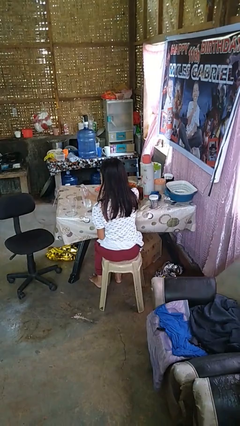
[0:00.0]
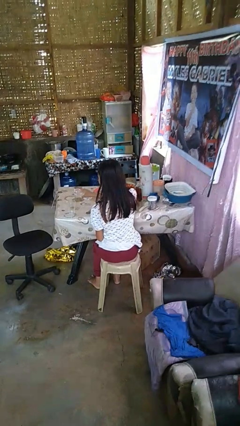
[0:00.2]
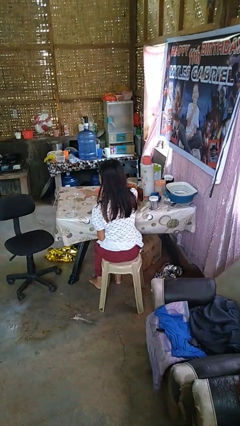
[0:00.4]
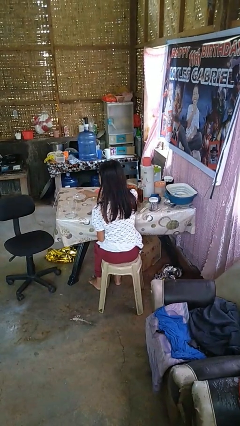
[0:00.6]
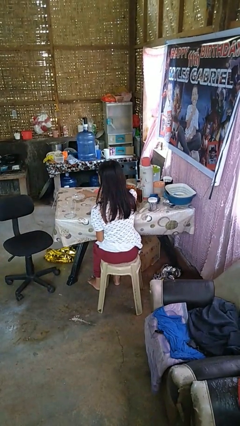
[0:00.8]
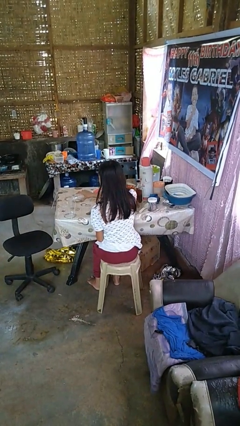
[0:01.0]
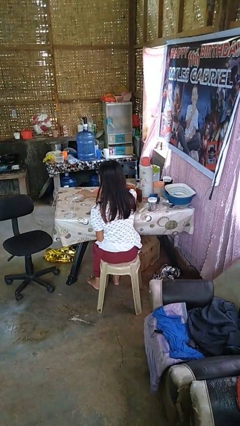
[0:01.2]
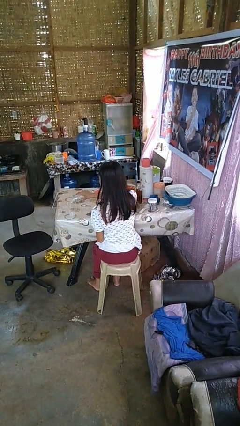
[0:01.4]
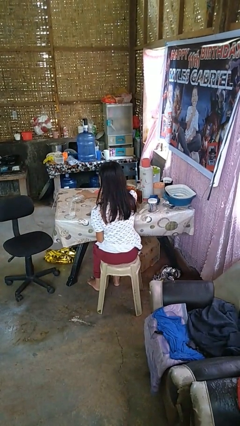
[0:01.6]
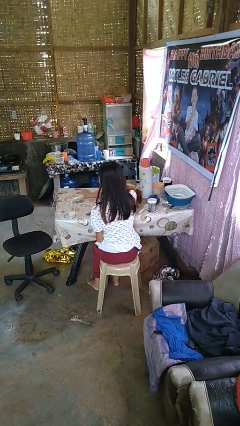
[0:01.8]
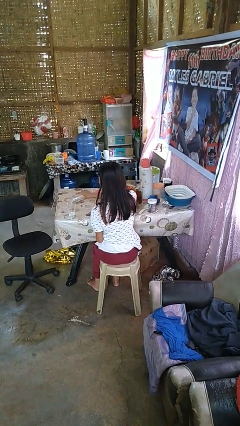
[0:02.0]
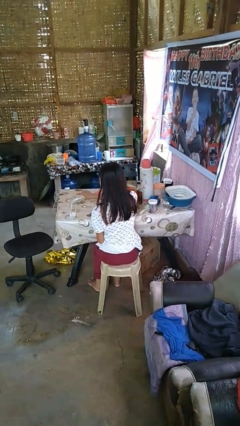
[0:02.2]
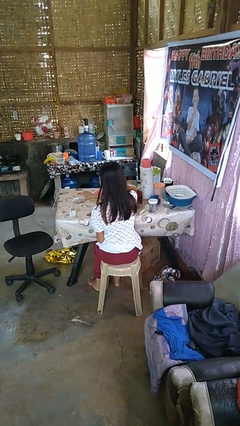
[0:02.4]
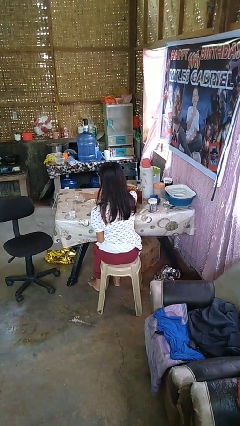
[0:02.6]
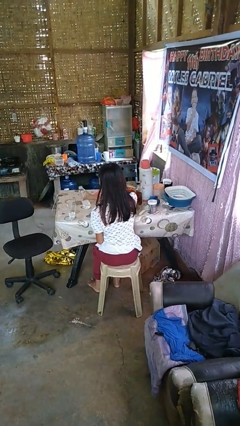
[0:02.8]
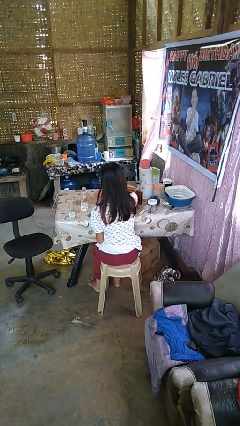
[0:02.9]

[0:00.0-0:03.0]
person pours liquid into cup

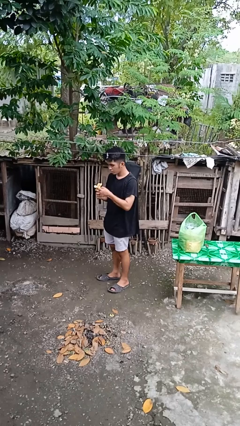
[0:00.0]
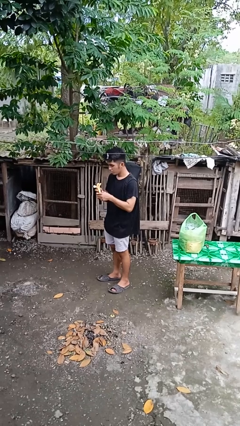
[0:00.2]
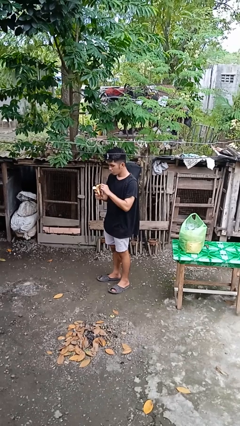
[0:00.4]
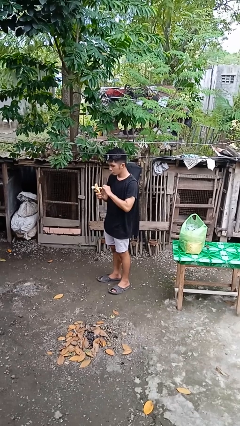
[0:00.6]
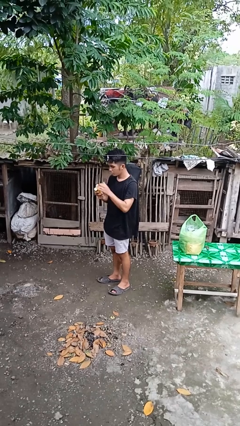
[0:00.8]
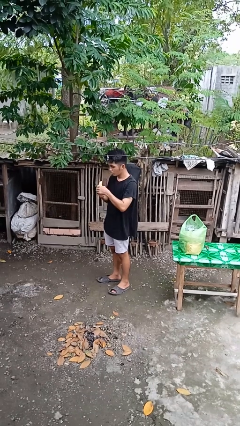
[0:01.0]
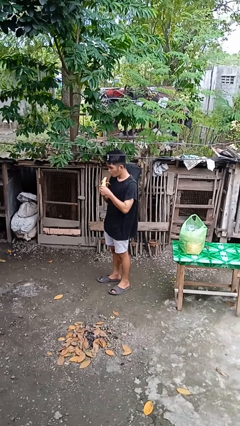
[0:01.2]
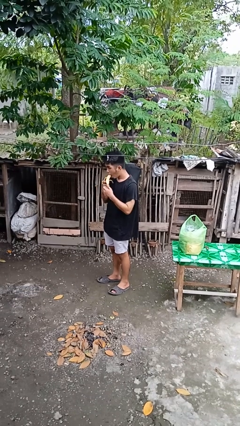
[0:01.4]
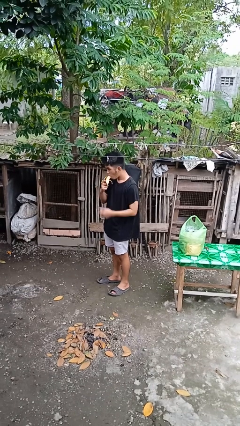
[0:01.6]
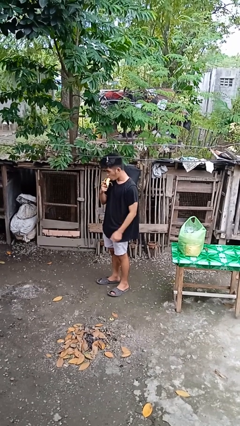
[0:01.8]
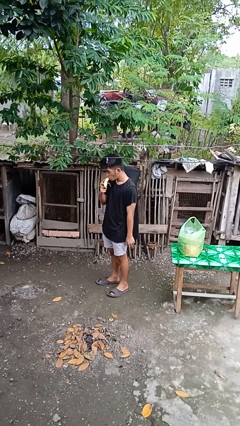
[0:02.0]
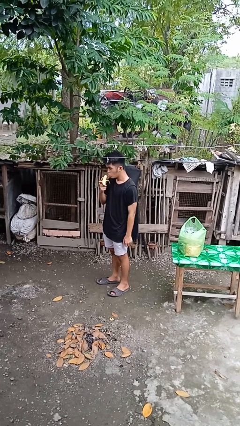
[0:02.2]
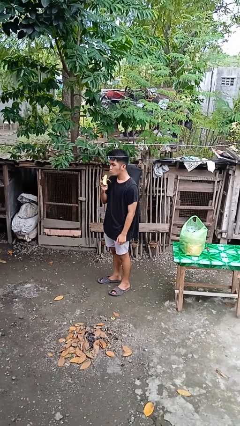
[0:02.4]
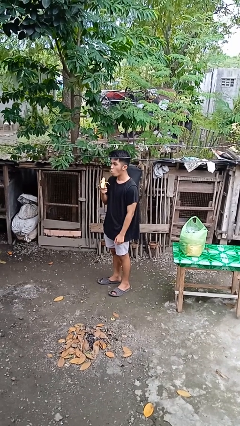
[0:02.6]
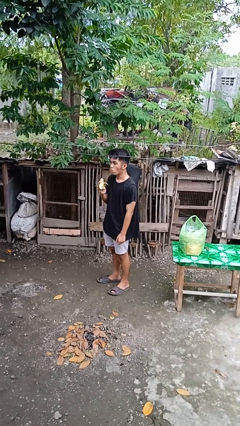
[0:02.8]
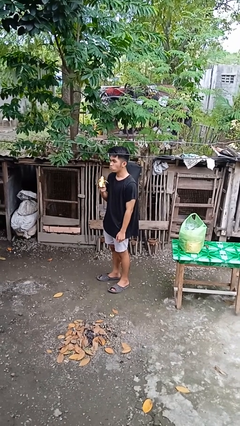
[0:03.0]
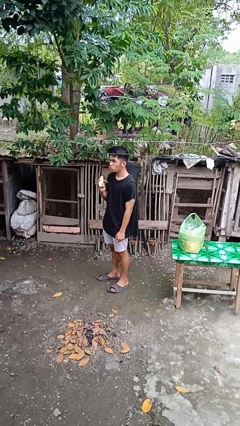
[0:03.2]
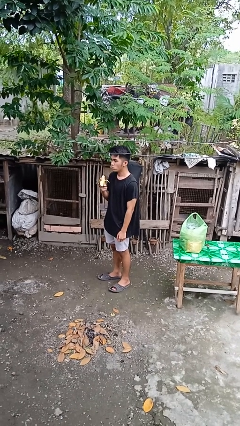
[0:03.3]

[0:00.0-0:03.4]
person eats banana

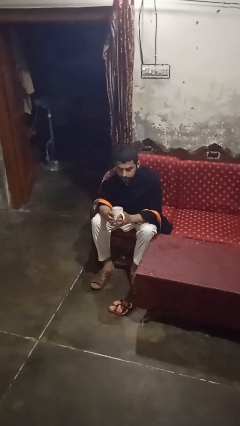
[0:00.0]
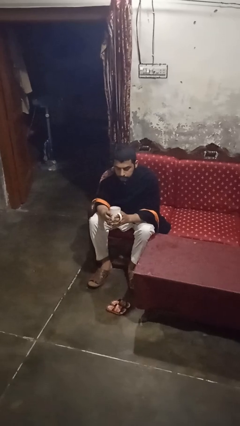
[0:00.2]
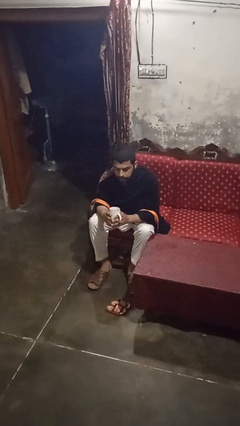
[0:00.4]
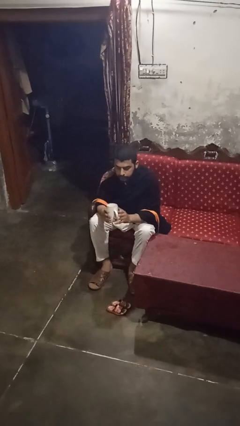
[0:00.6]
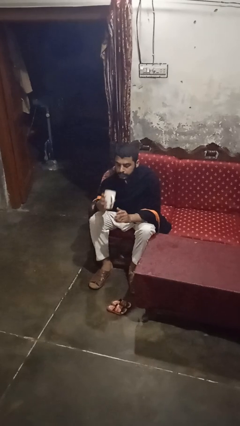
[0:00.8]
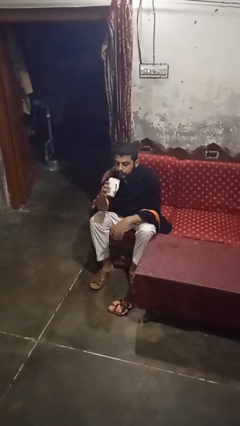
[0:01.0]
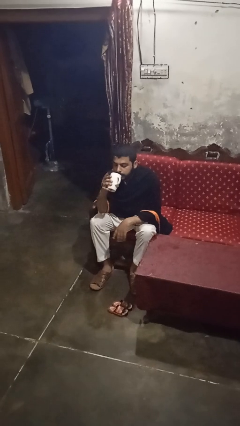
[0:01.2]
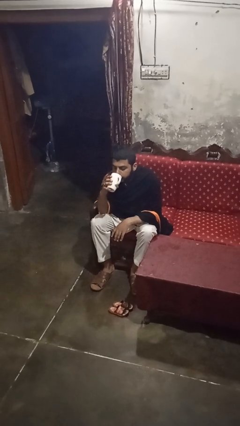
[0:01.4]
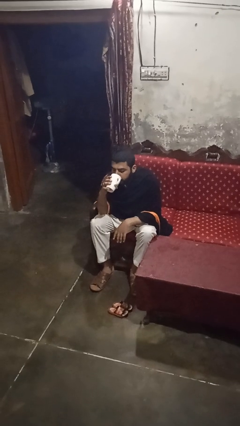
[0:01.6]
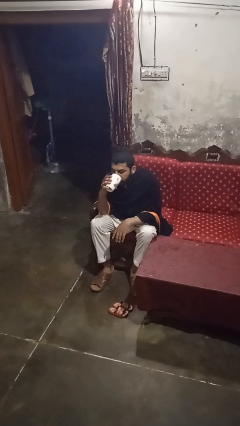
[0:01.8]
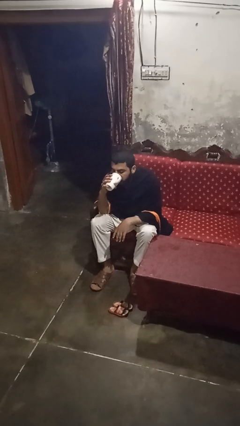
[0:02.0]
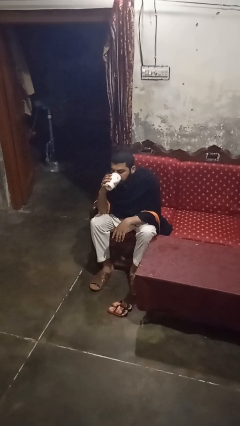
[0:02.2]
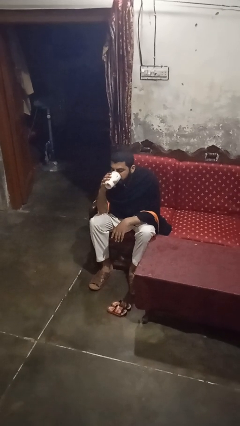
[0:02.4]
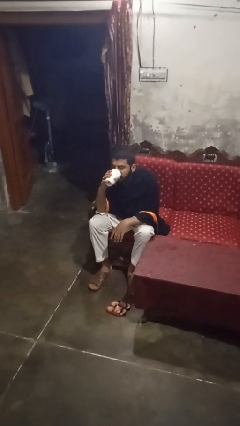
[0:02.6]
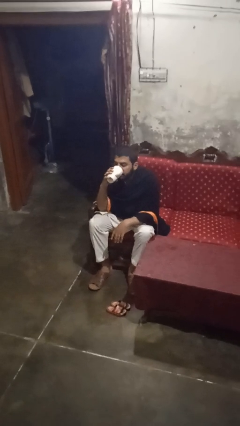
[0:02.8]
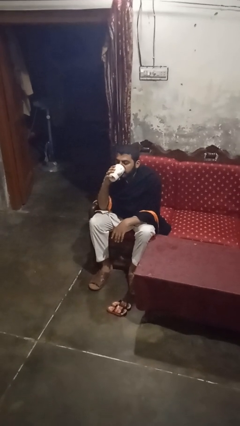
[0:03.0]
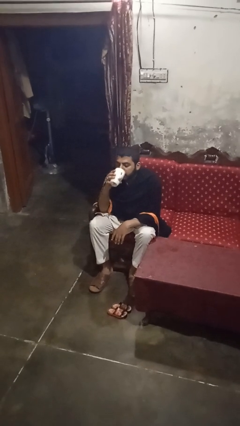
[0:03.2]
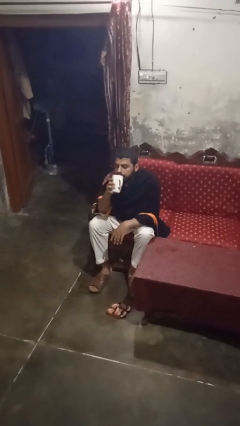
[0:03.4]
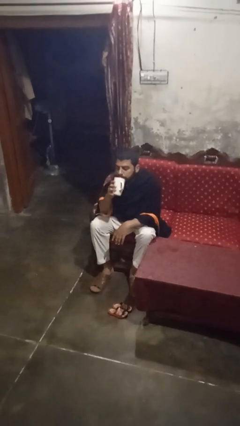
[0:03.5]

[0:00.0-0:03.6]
person drinks from mug

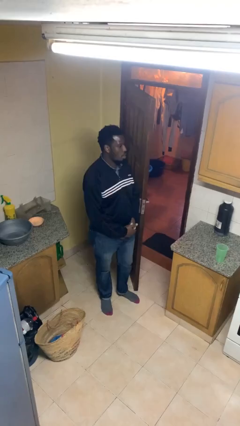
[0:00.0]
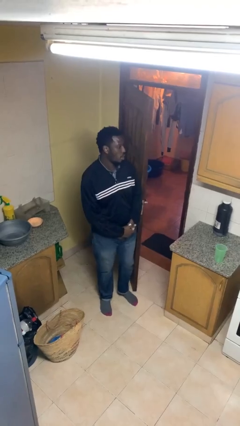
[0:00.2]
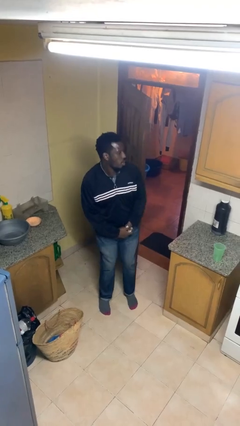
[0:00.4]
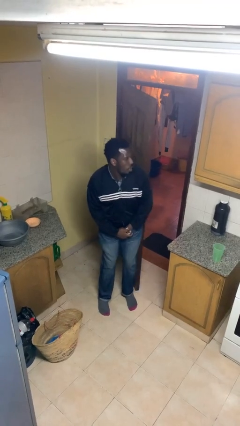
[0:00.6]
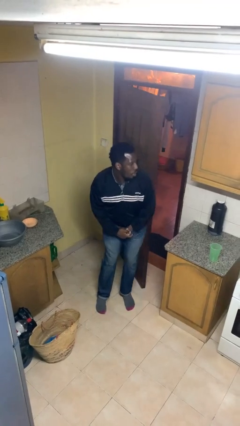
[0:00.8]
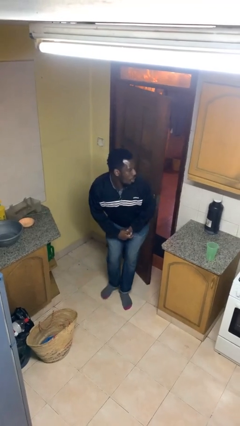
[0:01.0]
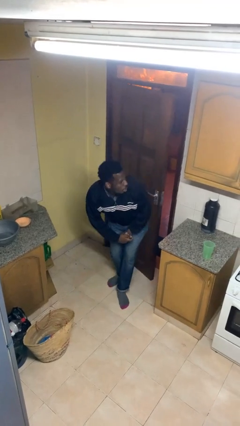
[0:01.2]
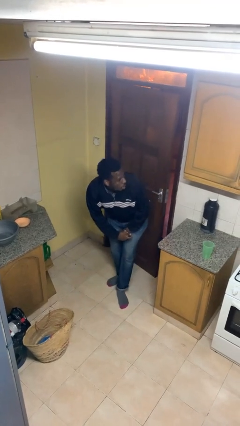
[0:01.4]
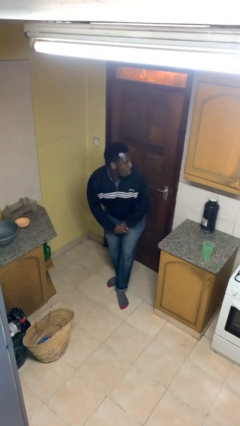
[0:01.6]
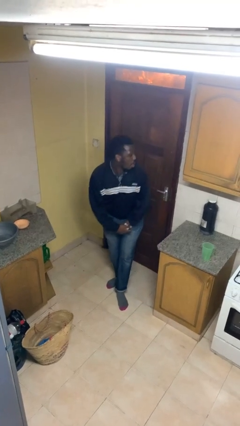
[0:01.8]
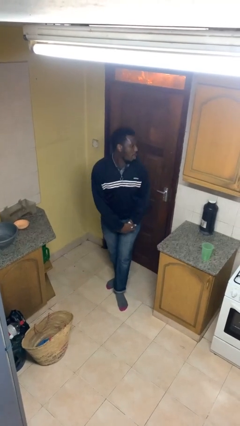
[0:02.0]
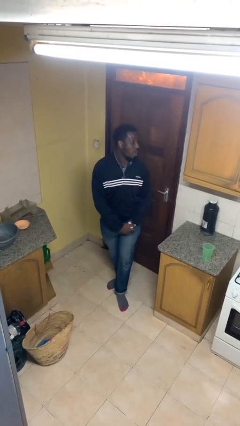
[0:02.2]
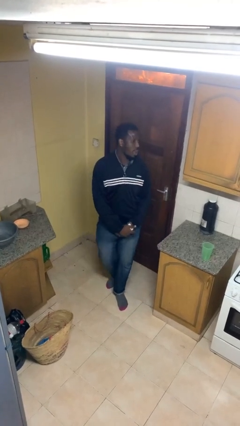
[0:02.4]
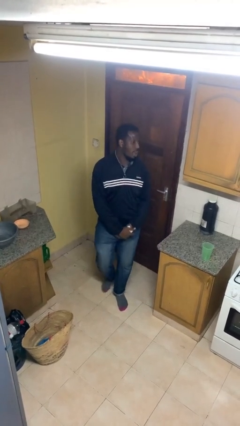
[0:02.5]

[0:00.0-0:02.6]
person closes door with hip

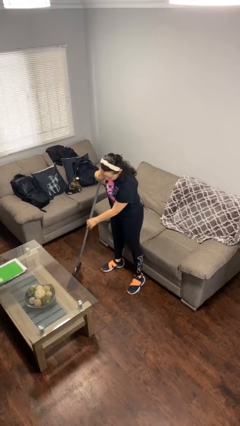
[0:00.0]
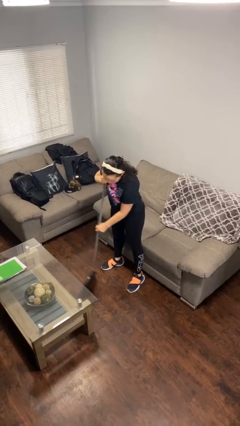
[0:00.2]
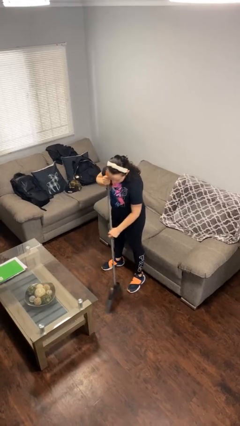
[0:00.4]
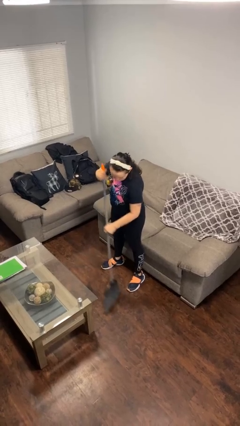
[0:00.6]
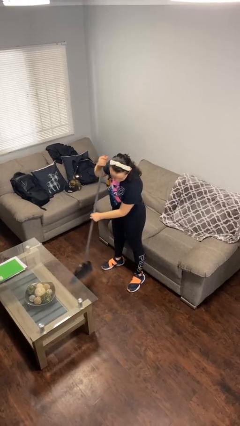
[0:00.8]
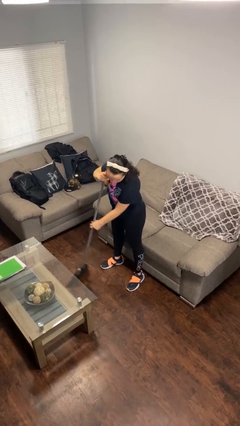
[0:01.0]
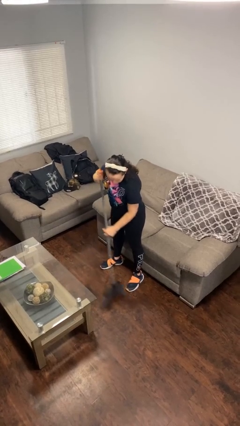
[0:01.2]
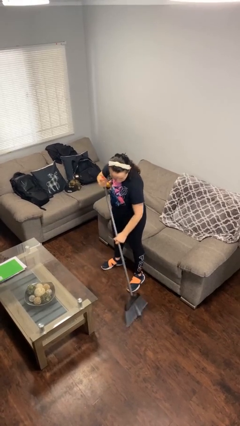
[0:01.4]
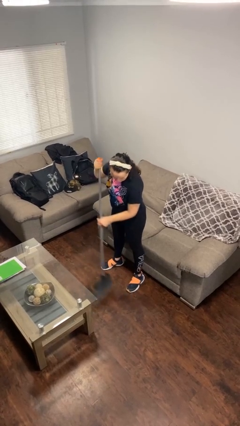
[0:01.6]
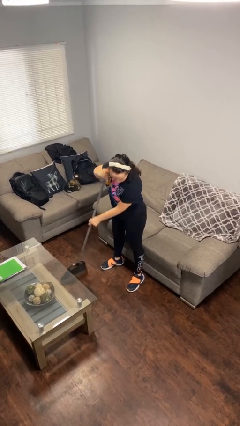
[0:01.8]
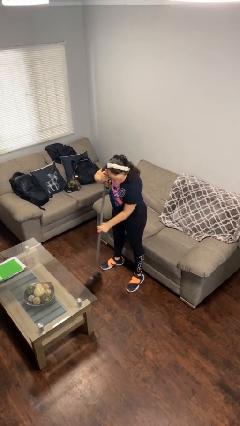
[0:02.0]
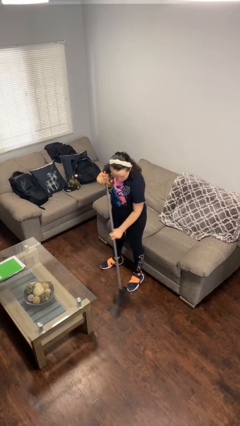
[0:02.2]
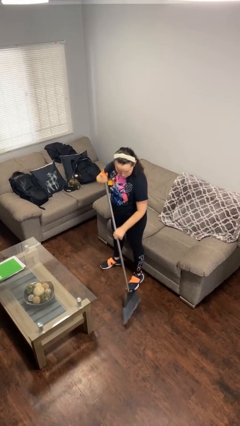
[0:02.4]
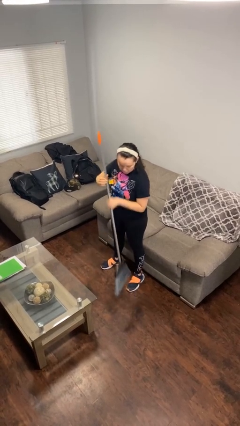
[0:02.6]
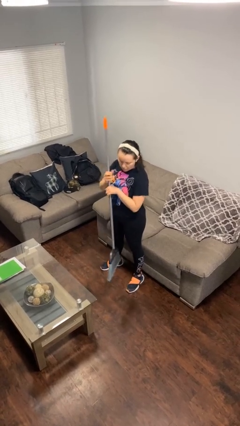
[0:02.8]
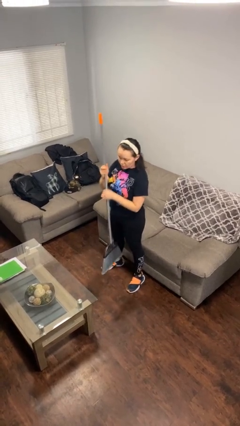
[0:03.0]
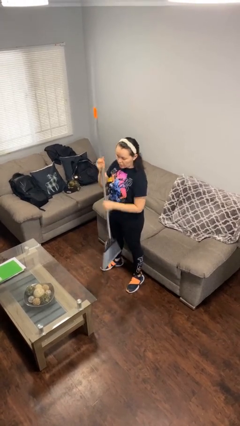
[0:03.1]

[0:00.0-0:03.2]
person sweeps floor

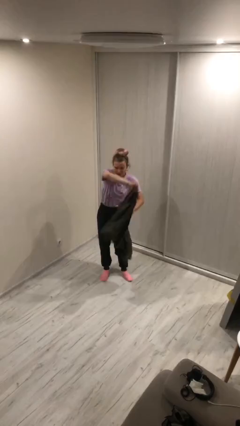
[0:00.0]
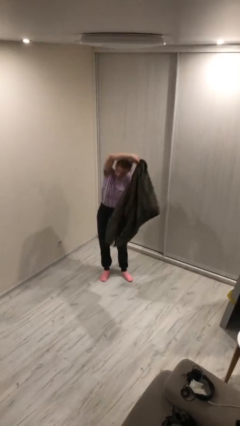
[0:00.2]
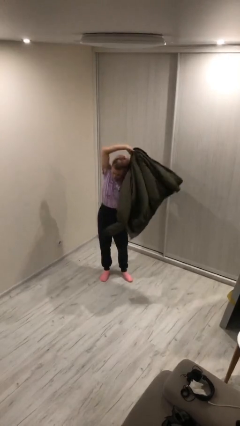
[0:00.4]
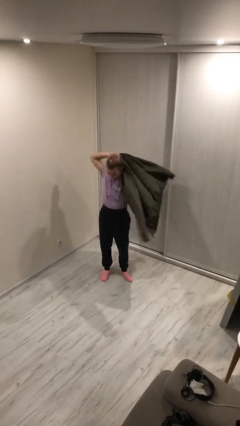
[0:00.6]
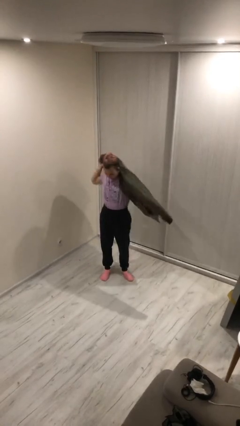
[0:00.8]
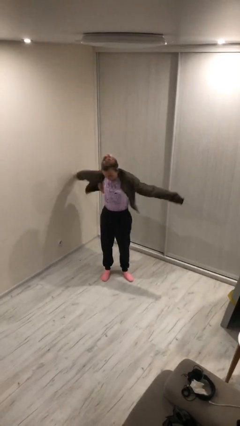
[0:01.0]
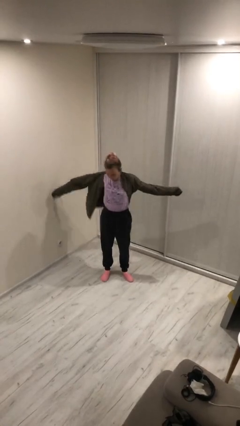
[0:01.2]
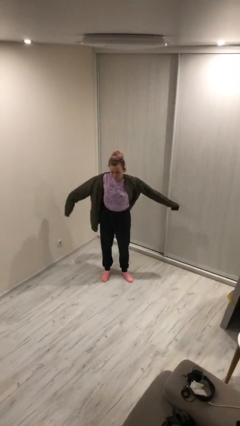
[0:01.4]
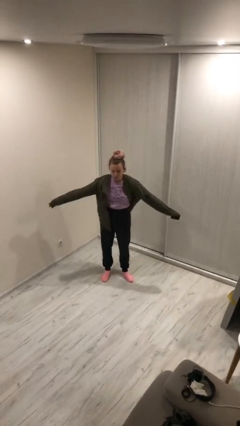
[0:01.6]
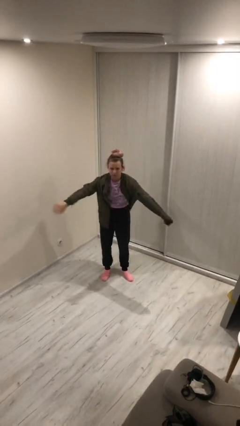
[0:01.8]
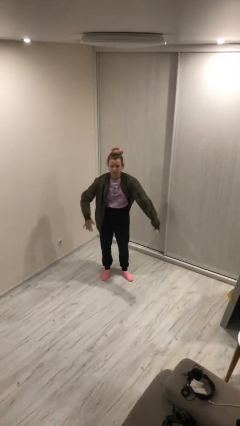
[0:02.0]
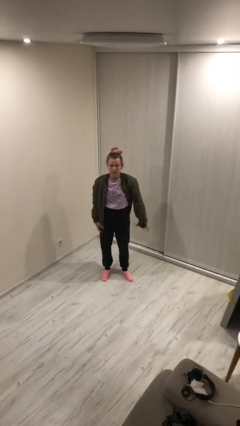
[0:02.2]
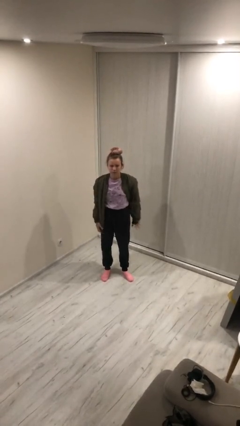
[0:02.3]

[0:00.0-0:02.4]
person puts on jacket
